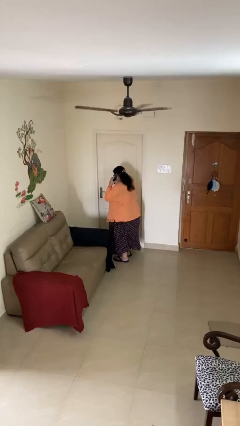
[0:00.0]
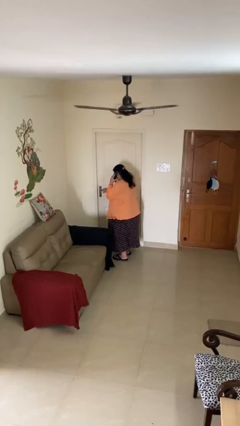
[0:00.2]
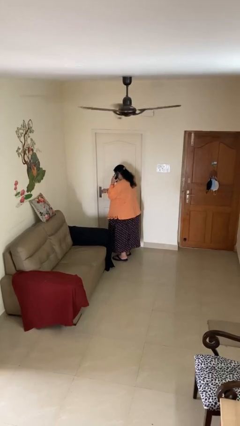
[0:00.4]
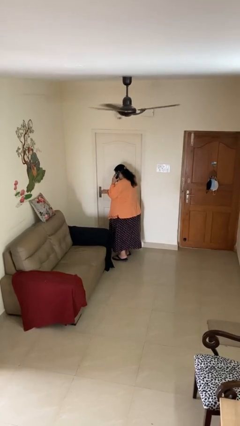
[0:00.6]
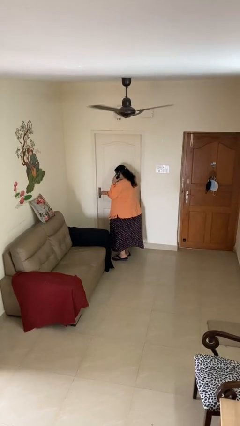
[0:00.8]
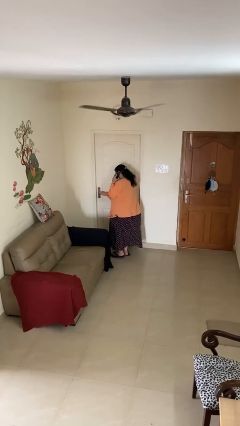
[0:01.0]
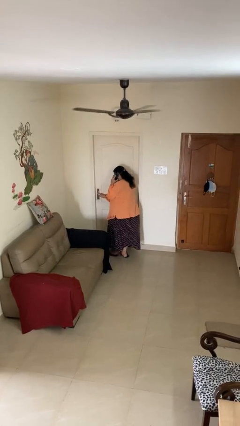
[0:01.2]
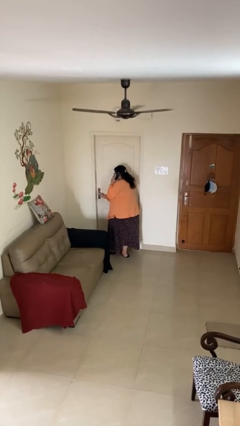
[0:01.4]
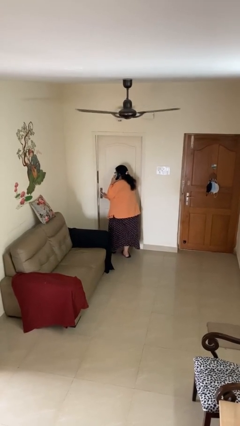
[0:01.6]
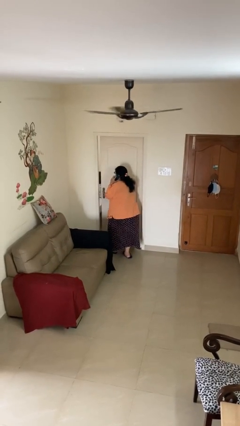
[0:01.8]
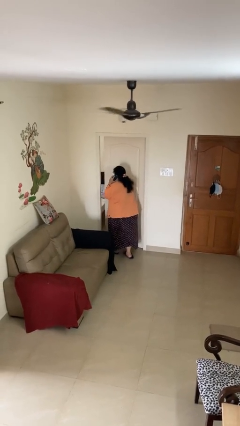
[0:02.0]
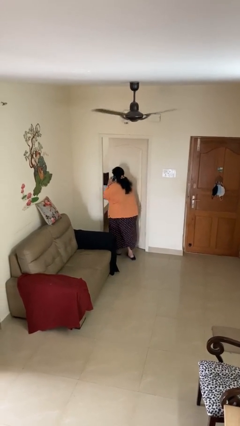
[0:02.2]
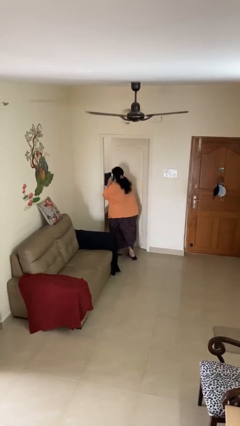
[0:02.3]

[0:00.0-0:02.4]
person opens facility door

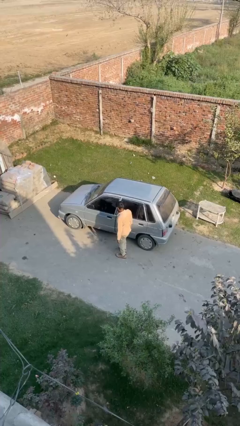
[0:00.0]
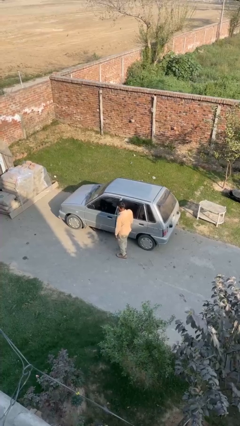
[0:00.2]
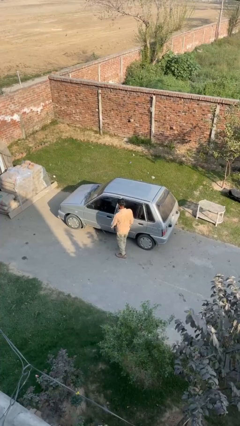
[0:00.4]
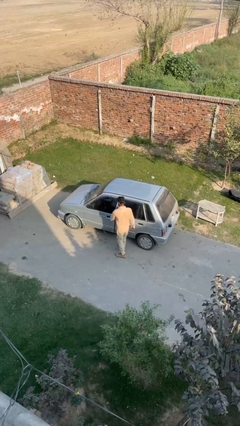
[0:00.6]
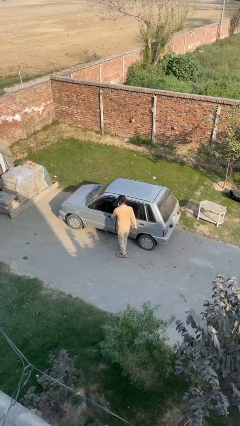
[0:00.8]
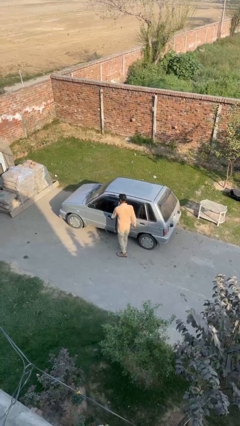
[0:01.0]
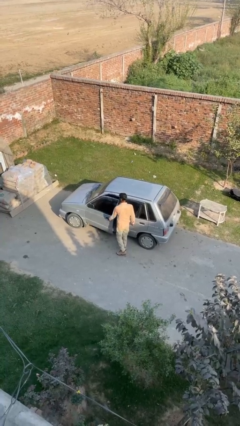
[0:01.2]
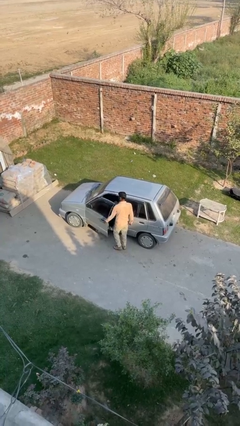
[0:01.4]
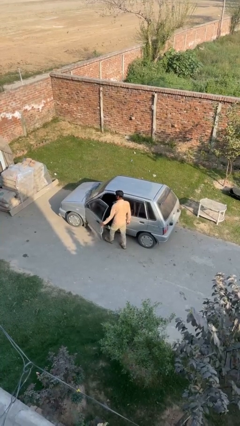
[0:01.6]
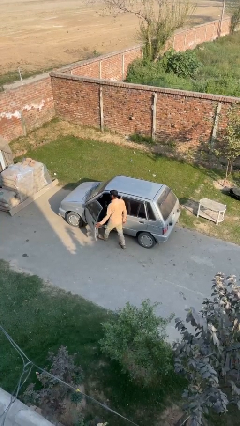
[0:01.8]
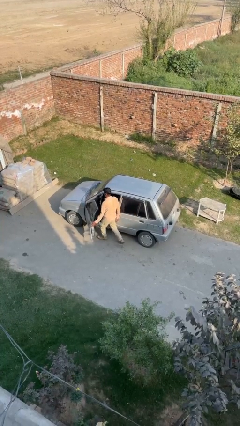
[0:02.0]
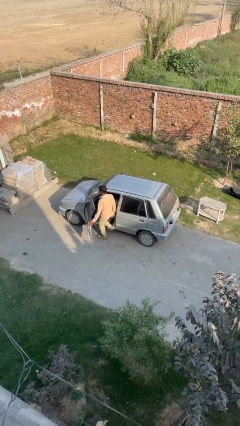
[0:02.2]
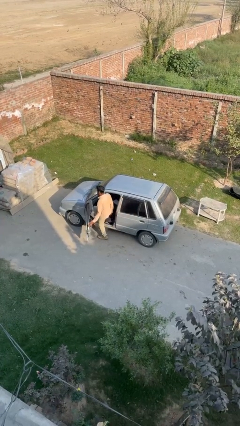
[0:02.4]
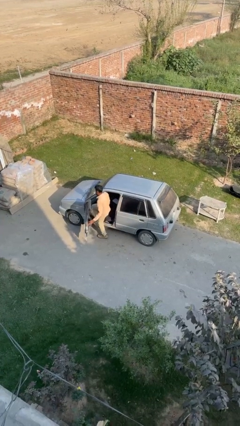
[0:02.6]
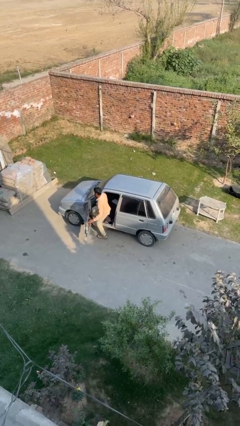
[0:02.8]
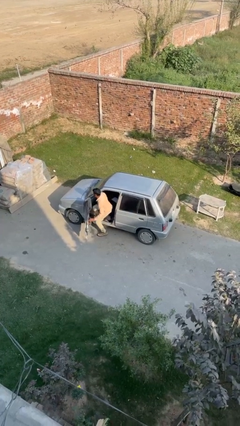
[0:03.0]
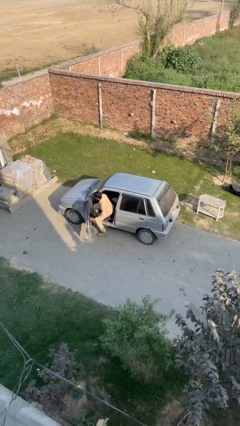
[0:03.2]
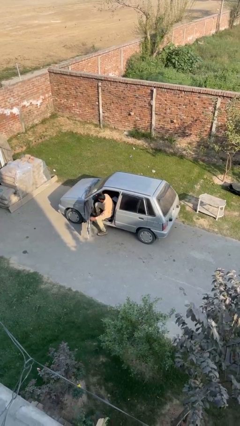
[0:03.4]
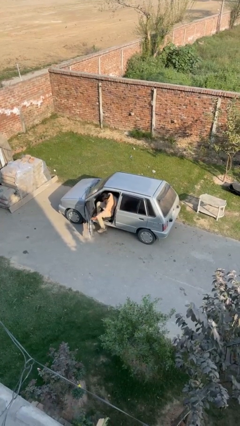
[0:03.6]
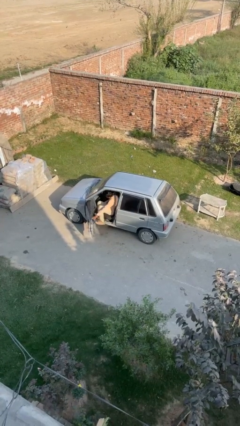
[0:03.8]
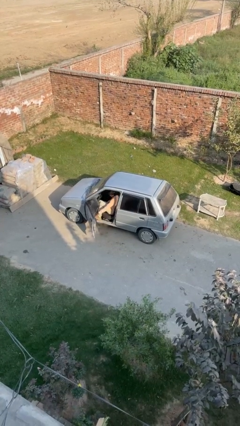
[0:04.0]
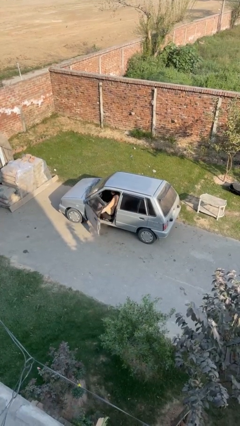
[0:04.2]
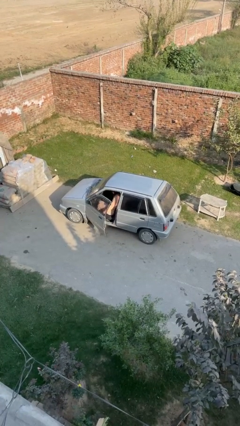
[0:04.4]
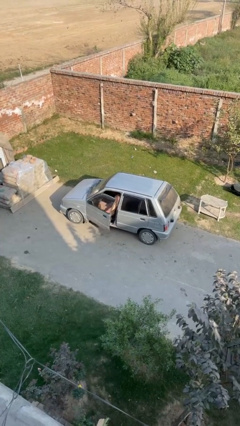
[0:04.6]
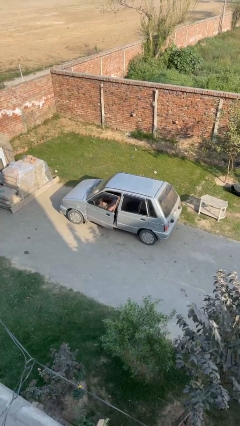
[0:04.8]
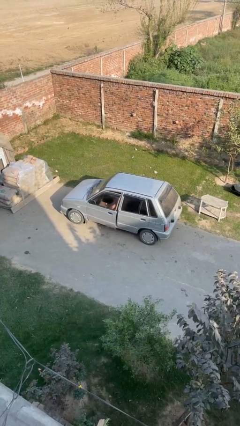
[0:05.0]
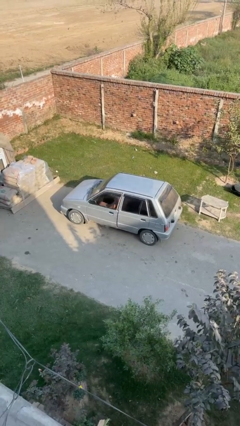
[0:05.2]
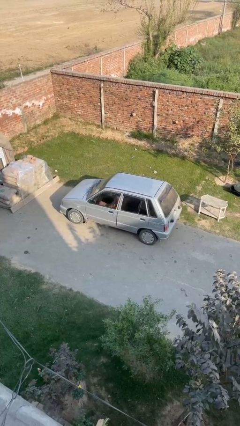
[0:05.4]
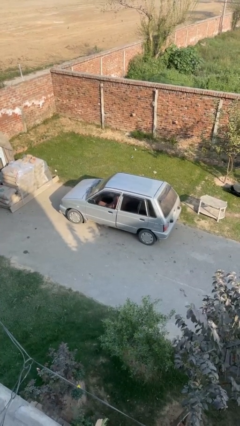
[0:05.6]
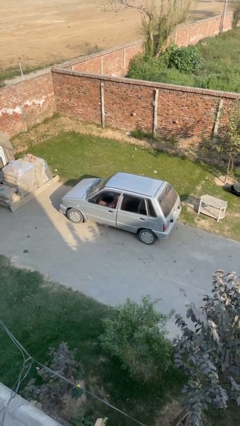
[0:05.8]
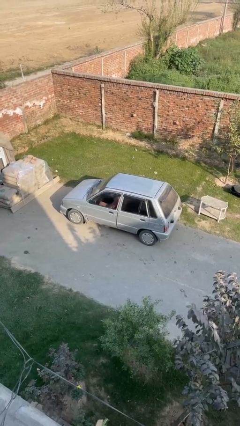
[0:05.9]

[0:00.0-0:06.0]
car picks up person

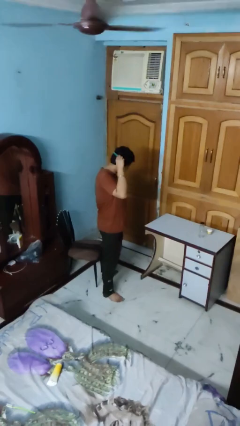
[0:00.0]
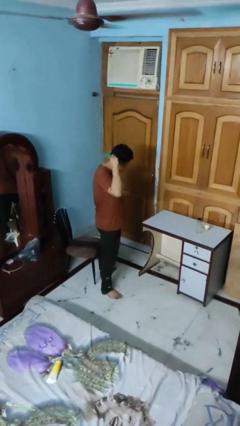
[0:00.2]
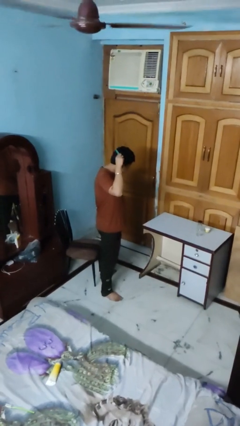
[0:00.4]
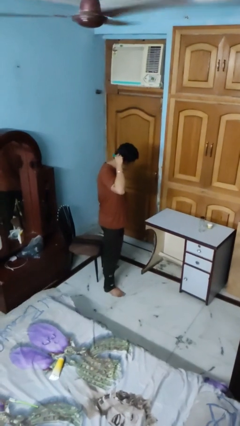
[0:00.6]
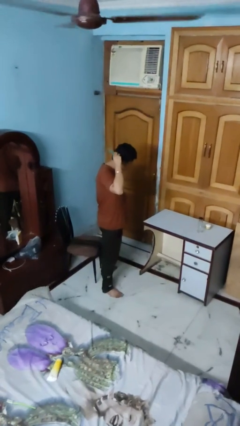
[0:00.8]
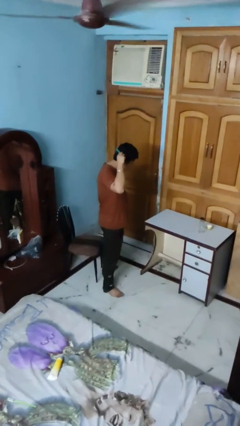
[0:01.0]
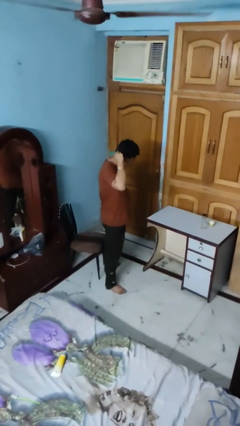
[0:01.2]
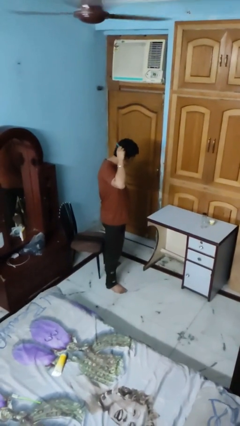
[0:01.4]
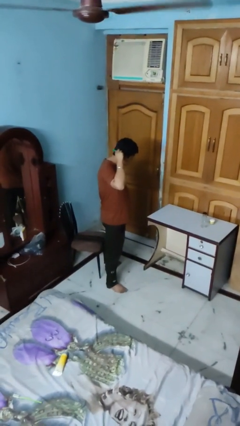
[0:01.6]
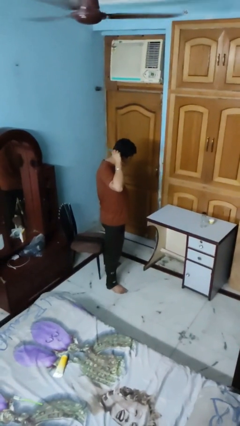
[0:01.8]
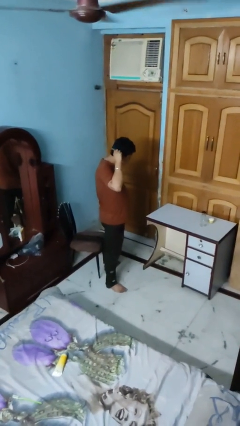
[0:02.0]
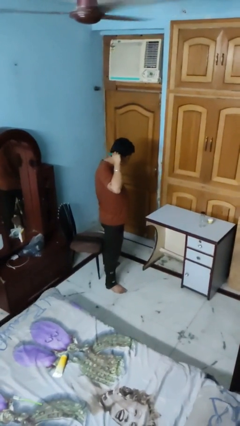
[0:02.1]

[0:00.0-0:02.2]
person brushes hair

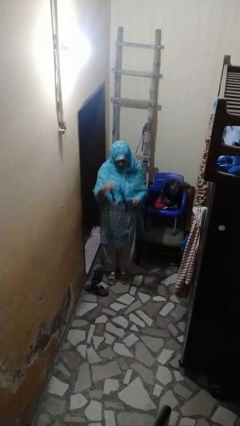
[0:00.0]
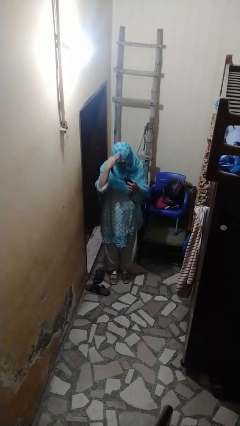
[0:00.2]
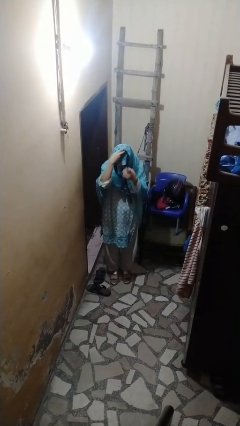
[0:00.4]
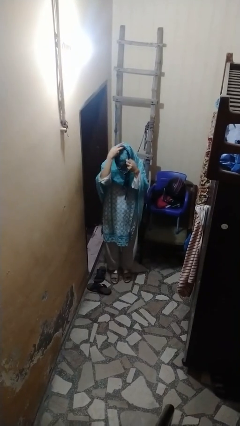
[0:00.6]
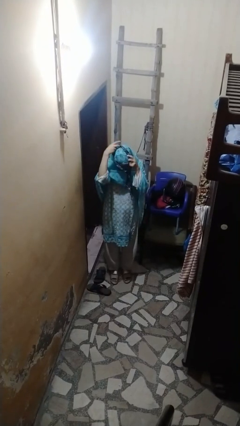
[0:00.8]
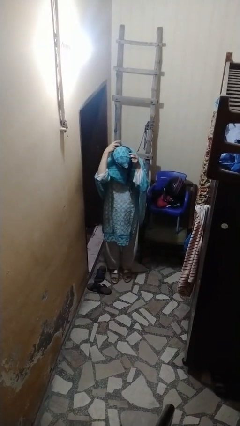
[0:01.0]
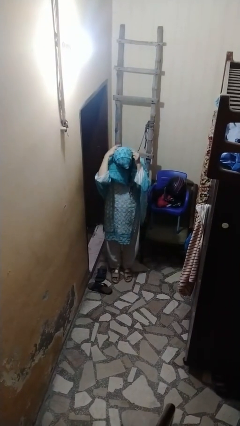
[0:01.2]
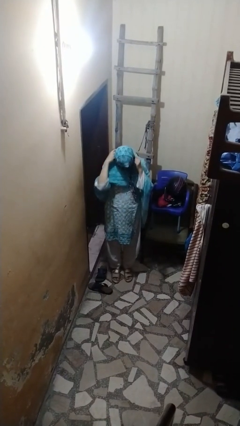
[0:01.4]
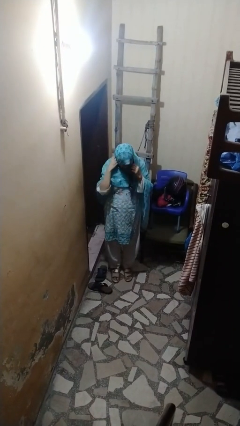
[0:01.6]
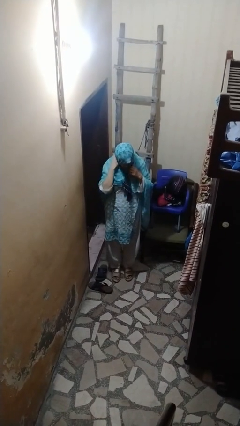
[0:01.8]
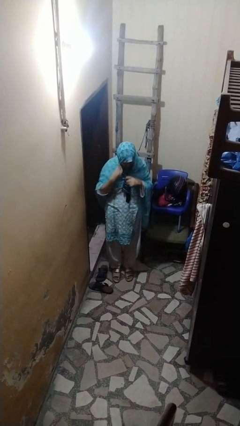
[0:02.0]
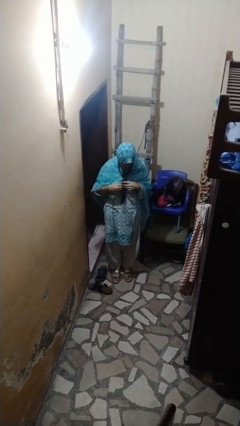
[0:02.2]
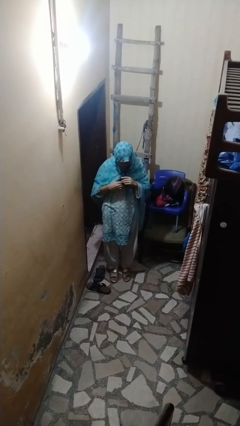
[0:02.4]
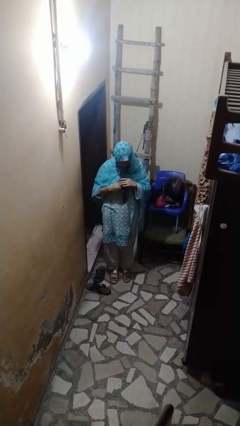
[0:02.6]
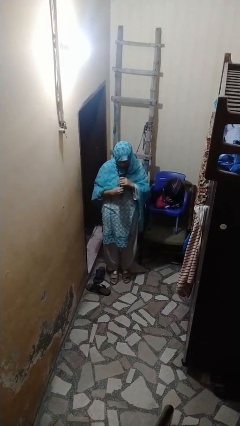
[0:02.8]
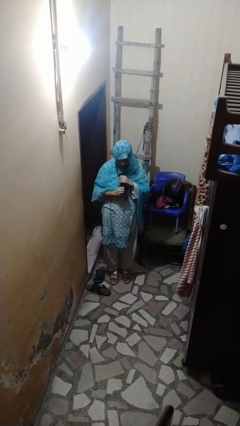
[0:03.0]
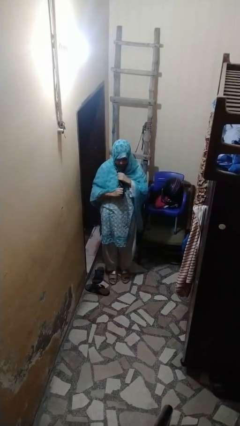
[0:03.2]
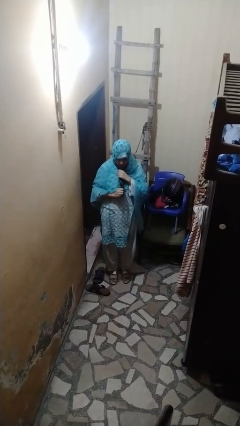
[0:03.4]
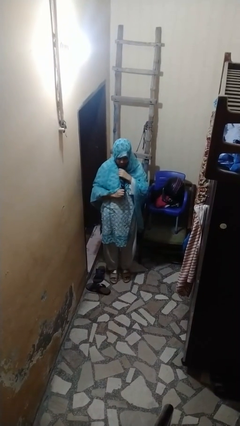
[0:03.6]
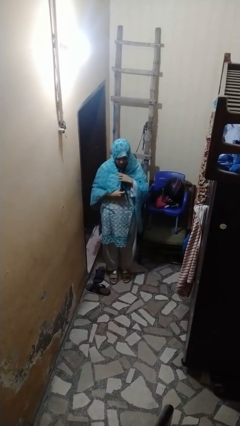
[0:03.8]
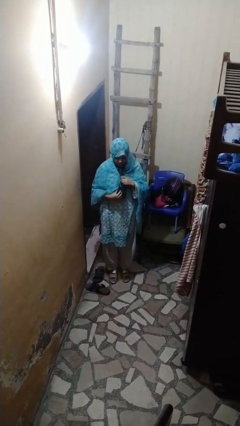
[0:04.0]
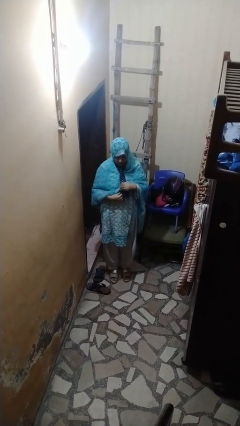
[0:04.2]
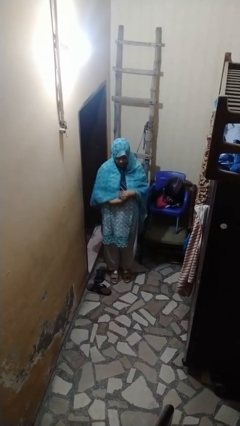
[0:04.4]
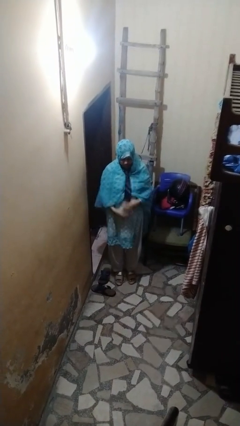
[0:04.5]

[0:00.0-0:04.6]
person puts on necktie

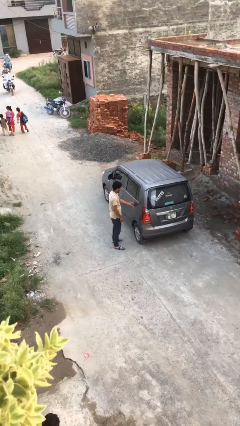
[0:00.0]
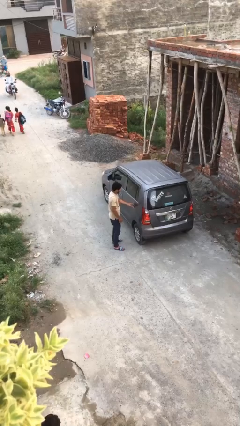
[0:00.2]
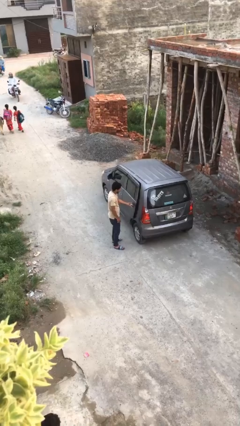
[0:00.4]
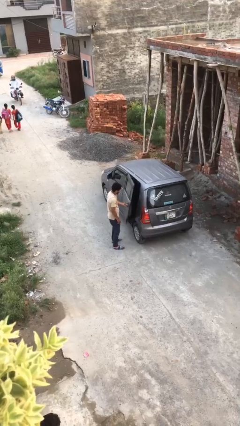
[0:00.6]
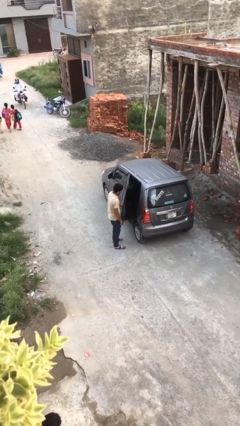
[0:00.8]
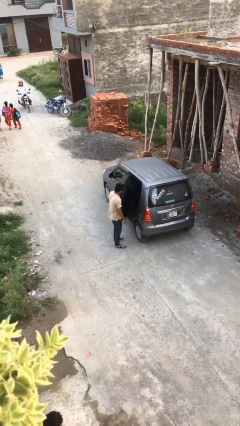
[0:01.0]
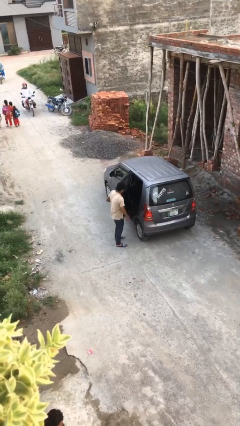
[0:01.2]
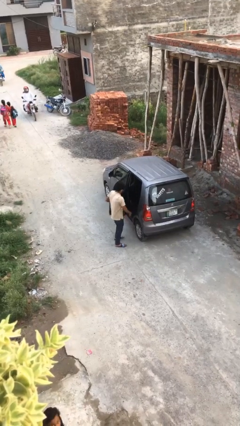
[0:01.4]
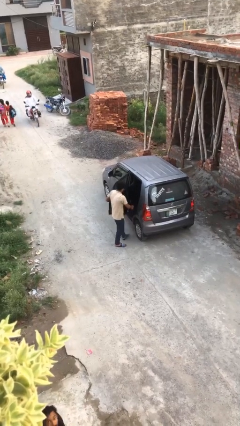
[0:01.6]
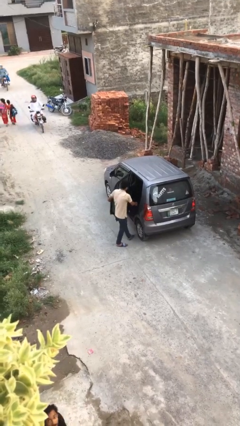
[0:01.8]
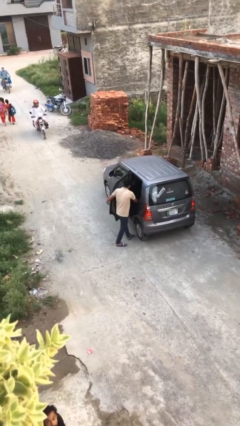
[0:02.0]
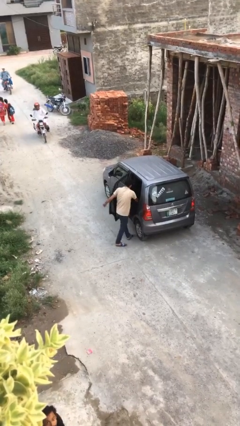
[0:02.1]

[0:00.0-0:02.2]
person opens car door

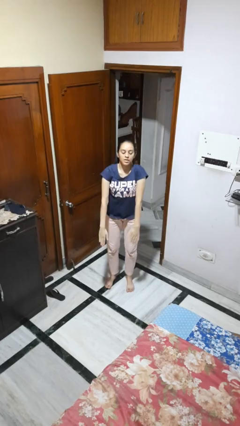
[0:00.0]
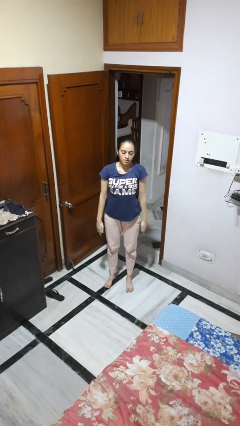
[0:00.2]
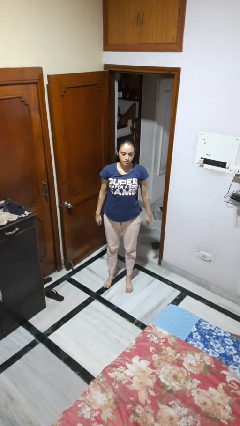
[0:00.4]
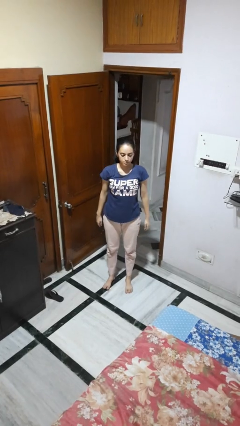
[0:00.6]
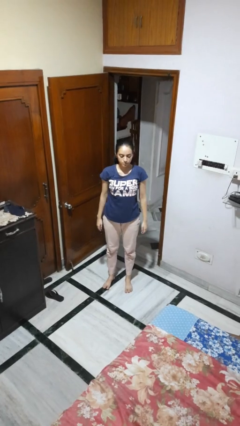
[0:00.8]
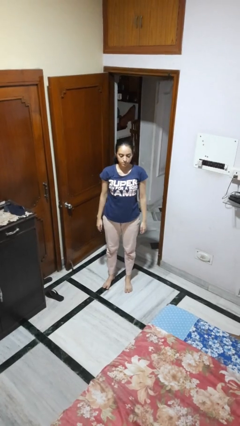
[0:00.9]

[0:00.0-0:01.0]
person stands up
